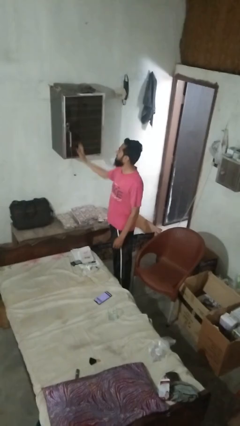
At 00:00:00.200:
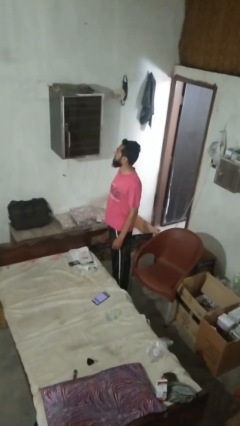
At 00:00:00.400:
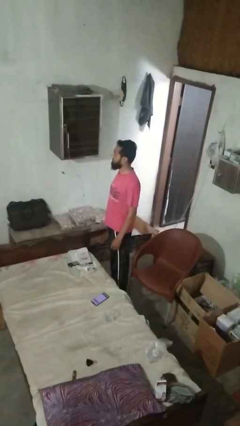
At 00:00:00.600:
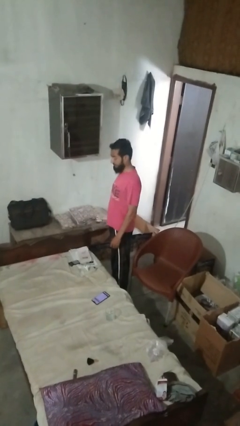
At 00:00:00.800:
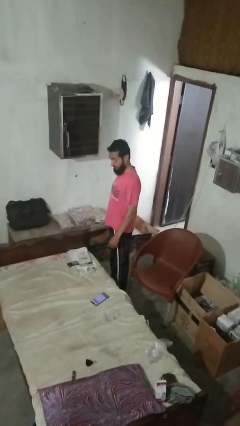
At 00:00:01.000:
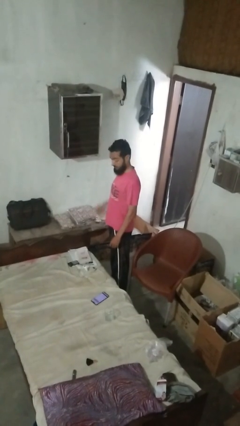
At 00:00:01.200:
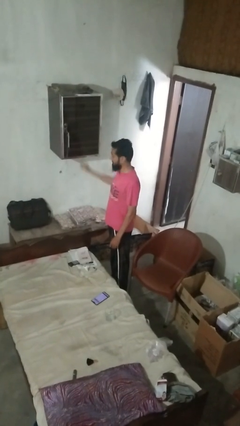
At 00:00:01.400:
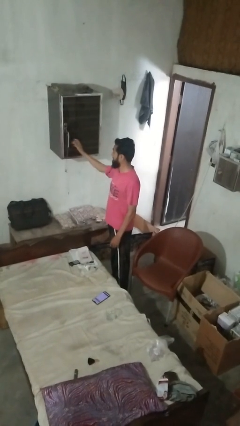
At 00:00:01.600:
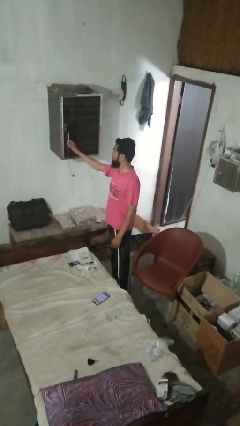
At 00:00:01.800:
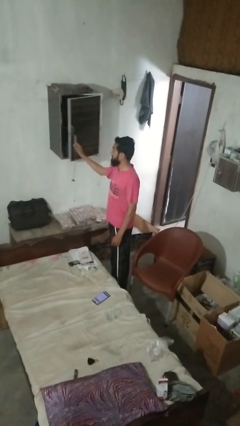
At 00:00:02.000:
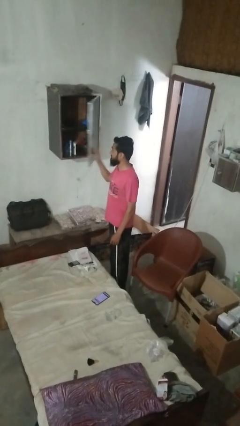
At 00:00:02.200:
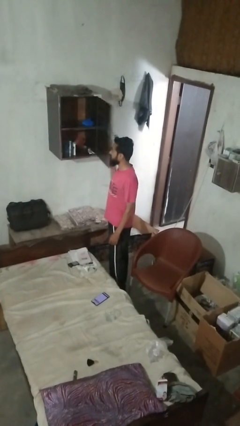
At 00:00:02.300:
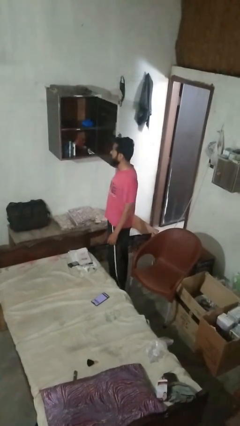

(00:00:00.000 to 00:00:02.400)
person opens dresser drawer

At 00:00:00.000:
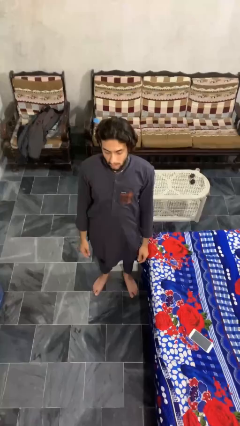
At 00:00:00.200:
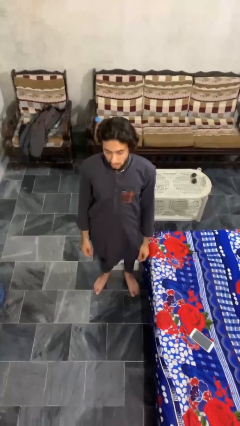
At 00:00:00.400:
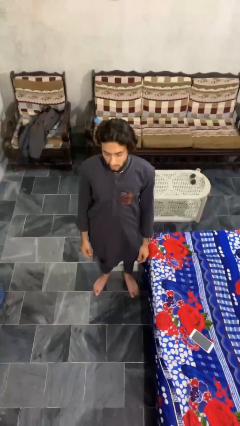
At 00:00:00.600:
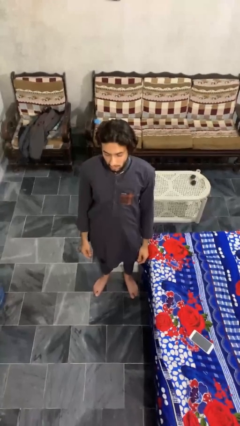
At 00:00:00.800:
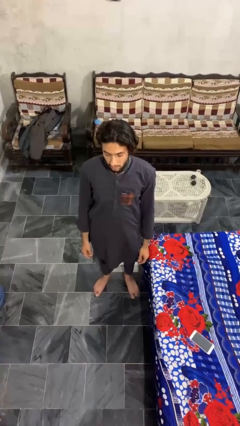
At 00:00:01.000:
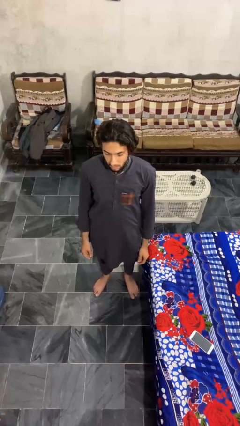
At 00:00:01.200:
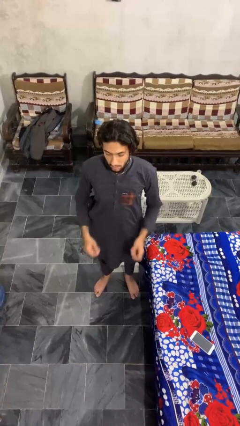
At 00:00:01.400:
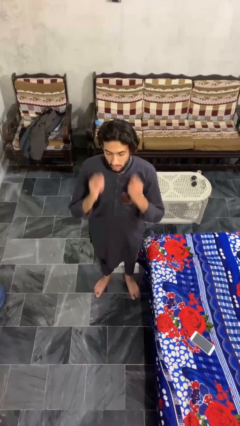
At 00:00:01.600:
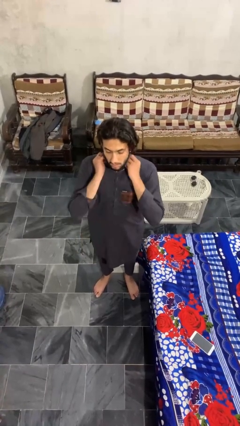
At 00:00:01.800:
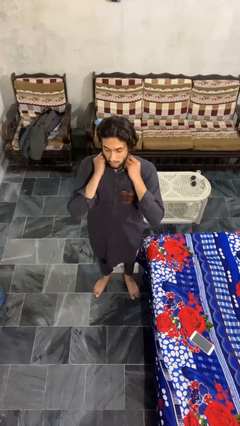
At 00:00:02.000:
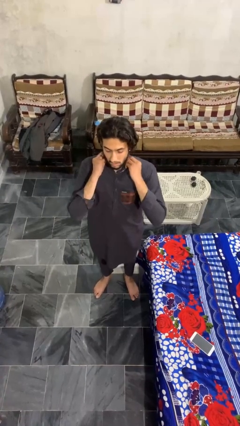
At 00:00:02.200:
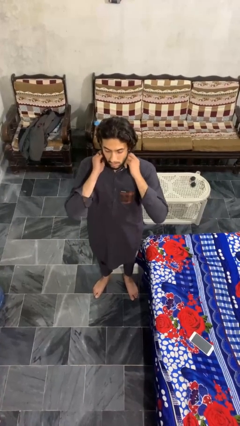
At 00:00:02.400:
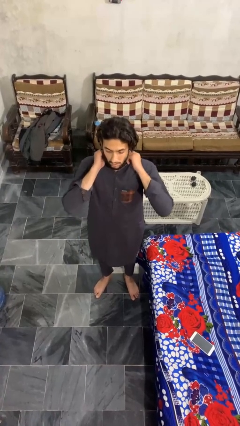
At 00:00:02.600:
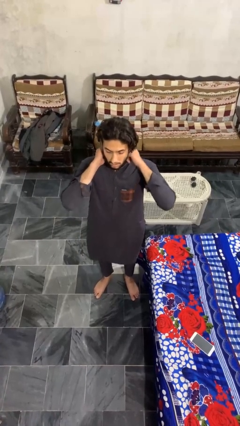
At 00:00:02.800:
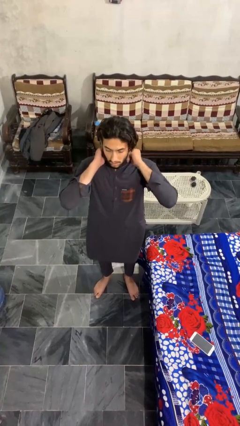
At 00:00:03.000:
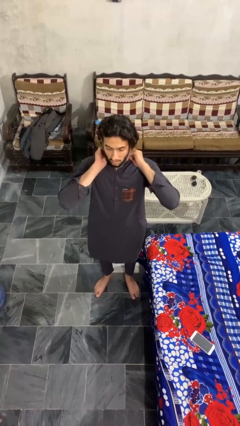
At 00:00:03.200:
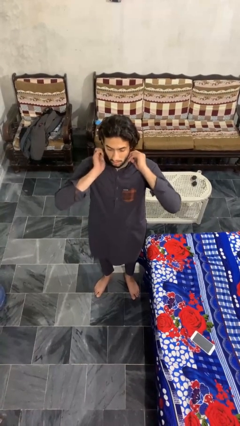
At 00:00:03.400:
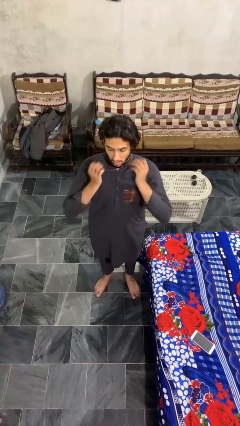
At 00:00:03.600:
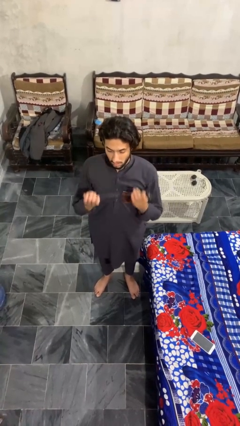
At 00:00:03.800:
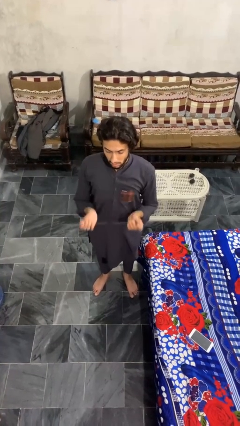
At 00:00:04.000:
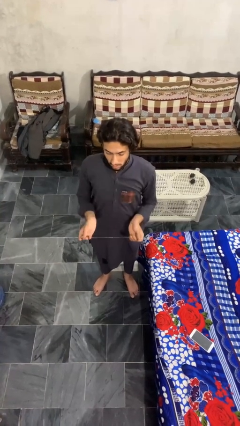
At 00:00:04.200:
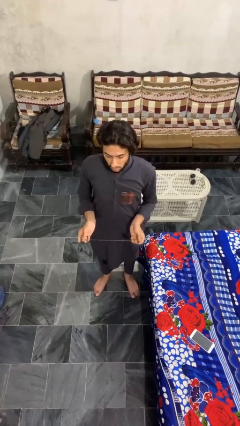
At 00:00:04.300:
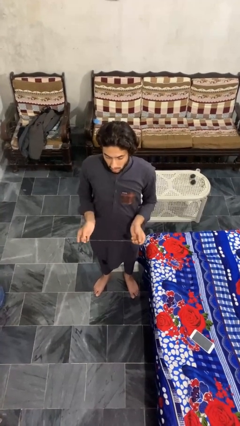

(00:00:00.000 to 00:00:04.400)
person takes off necklace

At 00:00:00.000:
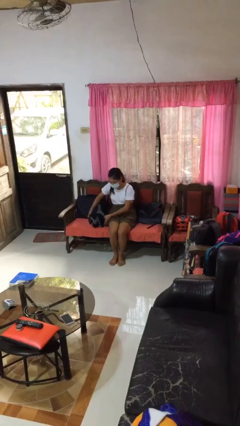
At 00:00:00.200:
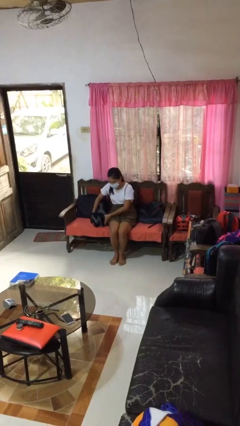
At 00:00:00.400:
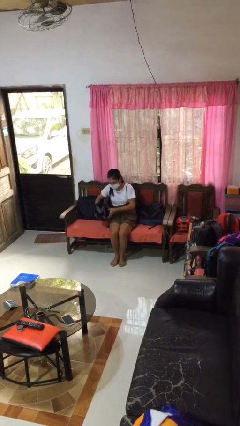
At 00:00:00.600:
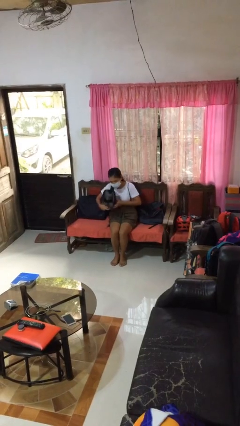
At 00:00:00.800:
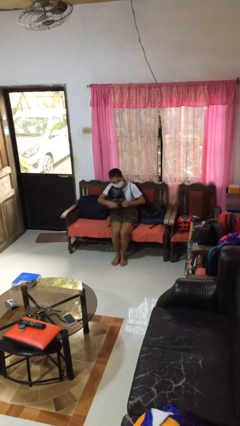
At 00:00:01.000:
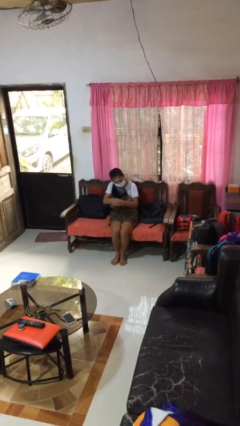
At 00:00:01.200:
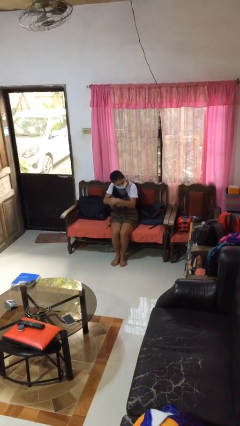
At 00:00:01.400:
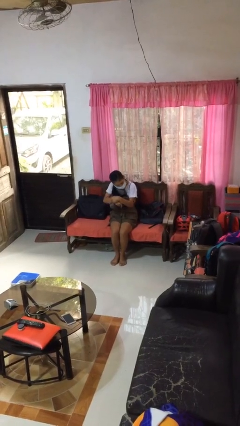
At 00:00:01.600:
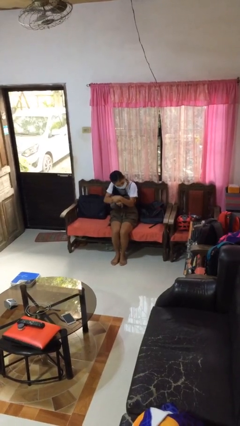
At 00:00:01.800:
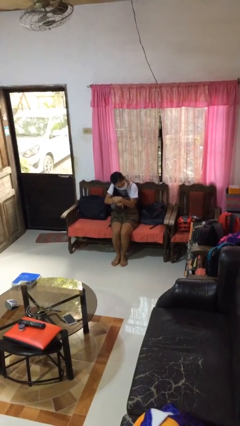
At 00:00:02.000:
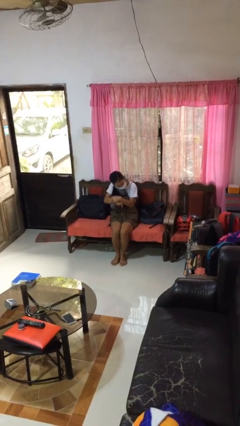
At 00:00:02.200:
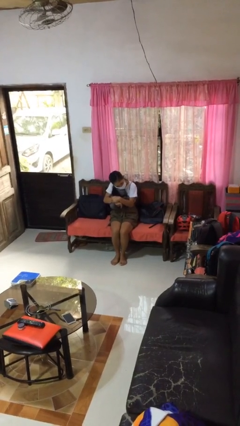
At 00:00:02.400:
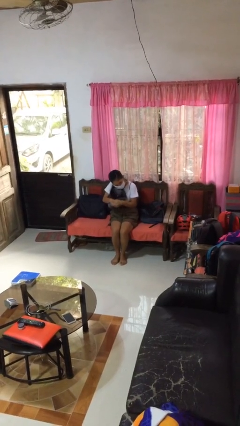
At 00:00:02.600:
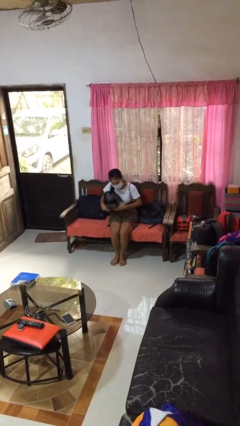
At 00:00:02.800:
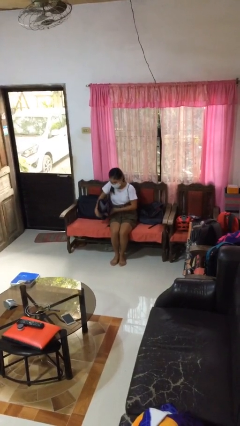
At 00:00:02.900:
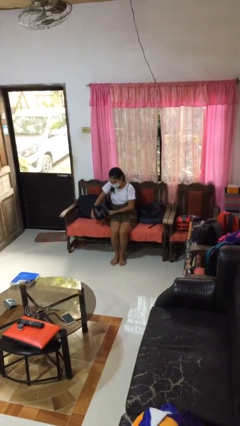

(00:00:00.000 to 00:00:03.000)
person hugs stuffed animal

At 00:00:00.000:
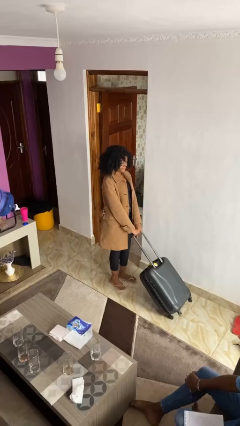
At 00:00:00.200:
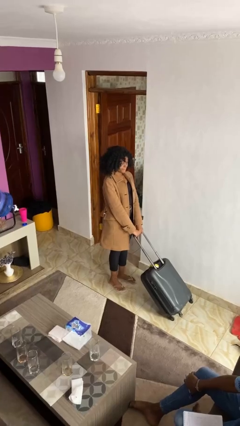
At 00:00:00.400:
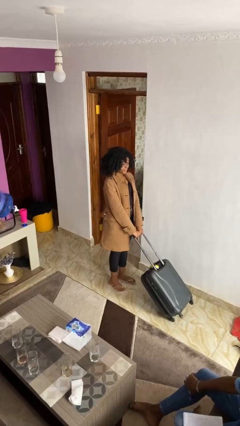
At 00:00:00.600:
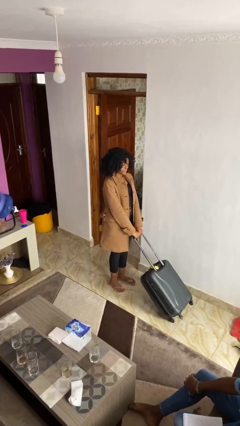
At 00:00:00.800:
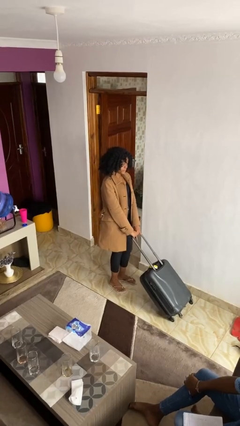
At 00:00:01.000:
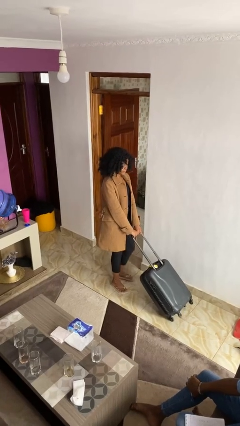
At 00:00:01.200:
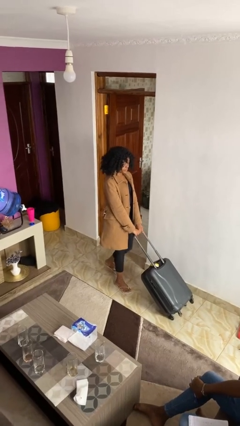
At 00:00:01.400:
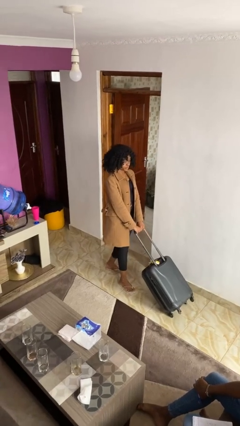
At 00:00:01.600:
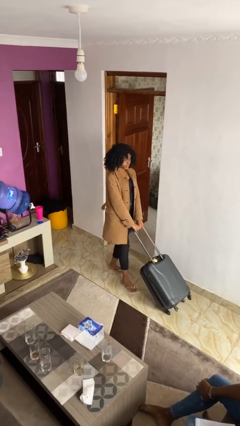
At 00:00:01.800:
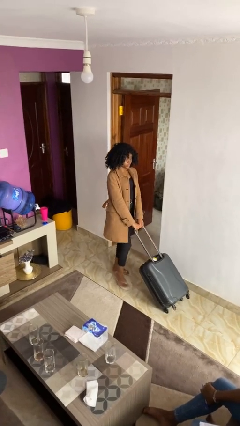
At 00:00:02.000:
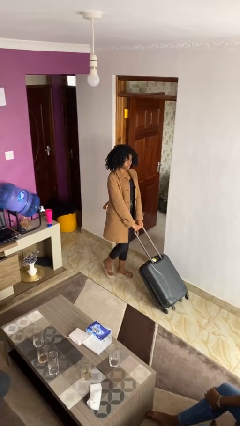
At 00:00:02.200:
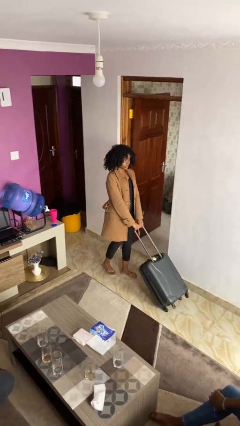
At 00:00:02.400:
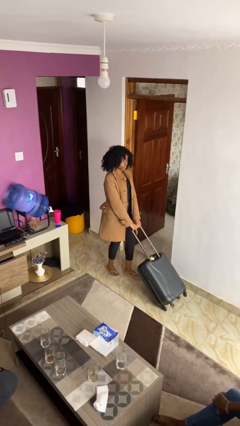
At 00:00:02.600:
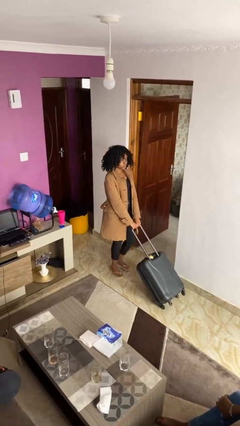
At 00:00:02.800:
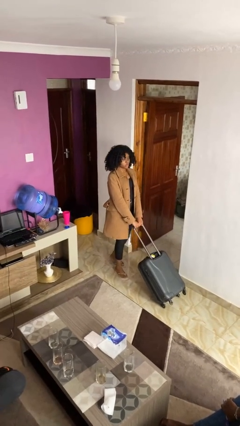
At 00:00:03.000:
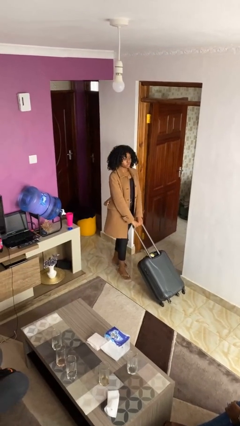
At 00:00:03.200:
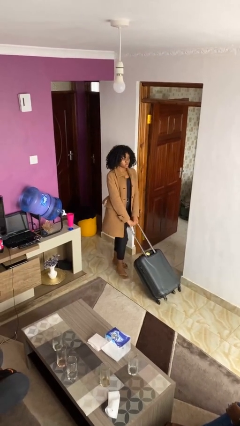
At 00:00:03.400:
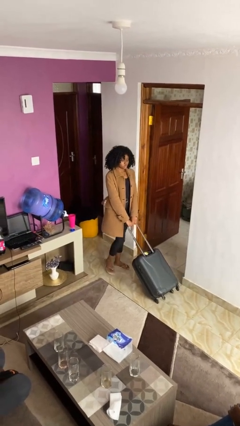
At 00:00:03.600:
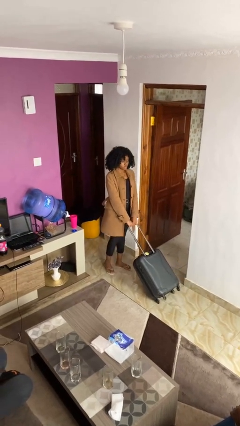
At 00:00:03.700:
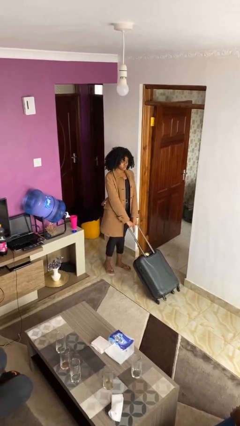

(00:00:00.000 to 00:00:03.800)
person pulls wheeled cart

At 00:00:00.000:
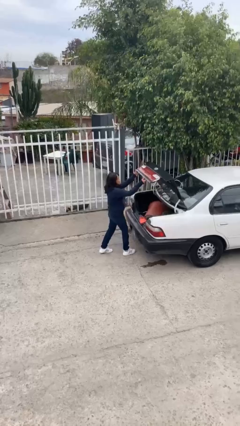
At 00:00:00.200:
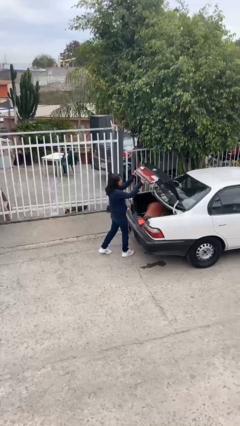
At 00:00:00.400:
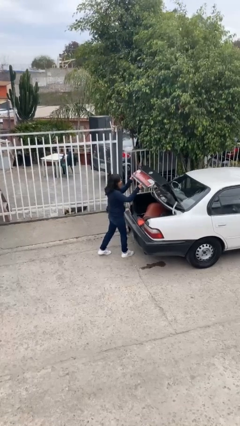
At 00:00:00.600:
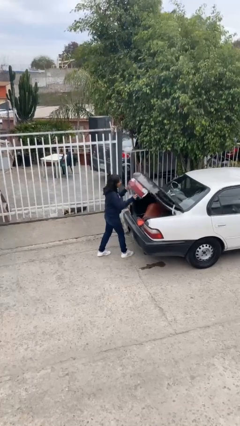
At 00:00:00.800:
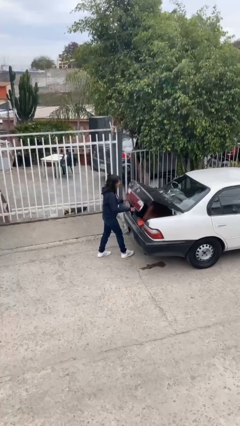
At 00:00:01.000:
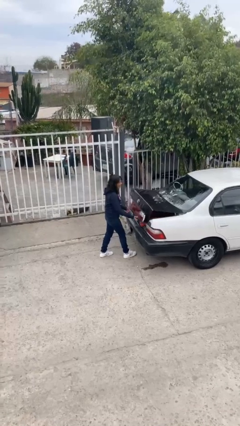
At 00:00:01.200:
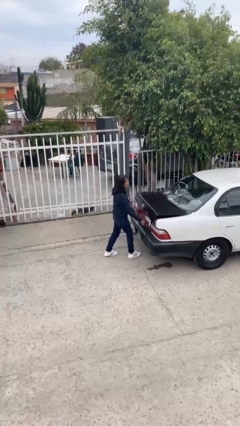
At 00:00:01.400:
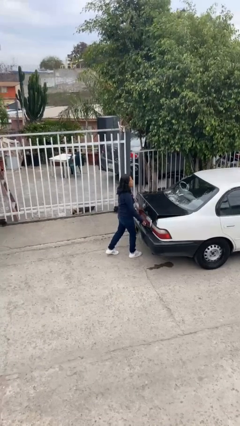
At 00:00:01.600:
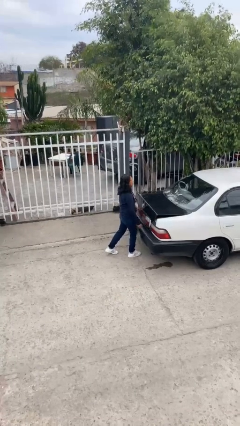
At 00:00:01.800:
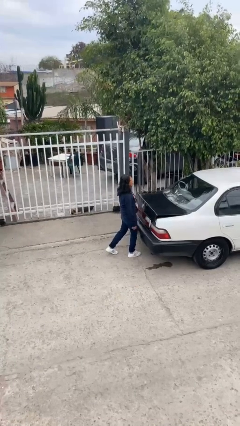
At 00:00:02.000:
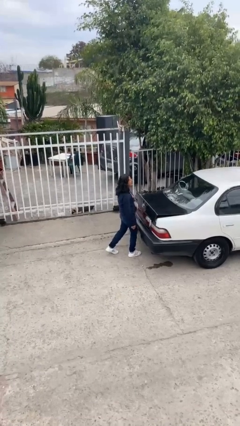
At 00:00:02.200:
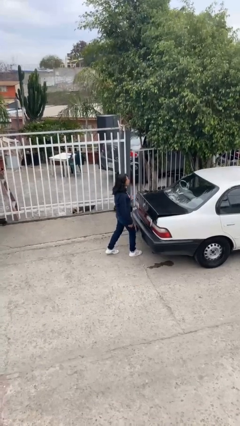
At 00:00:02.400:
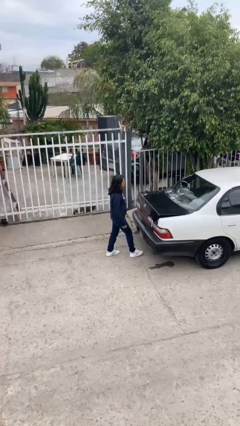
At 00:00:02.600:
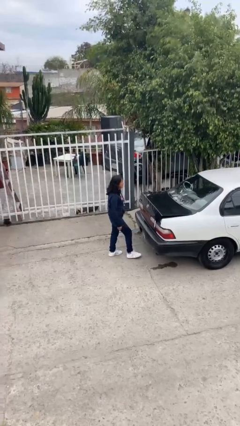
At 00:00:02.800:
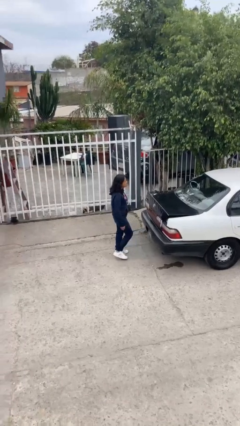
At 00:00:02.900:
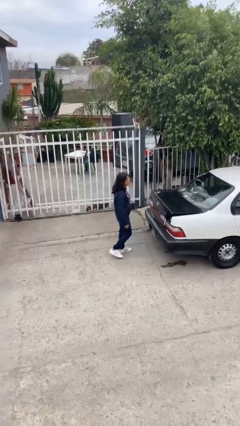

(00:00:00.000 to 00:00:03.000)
person closes car trunk

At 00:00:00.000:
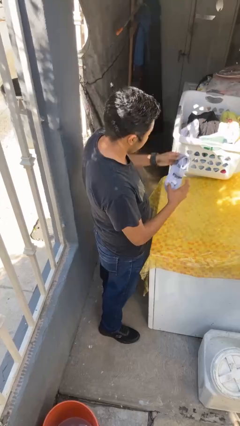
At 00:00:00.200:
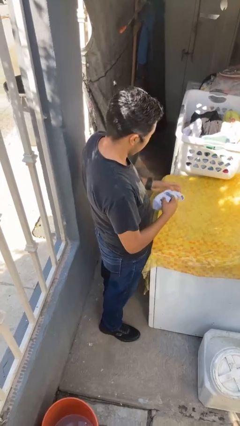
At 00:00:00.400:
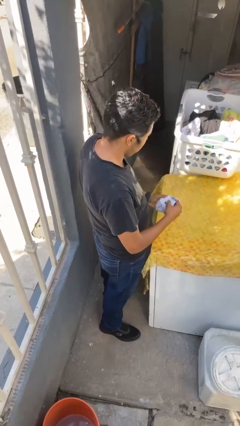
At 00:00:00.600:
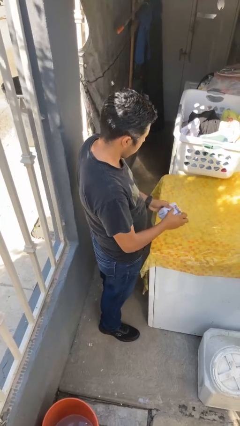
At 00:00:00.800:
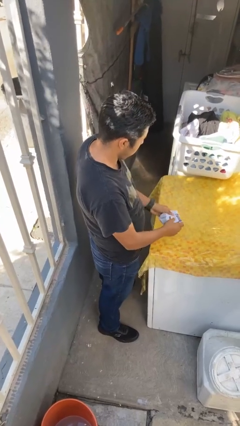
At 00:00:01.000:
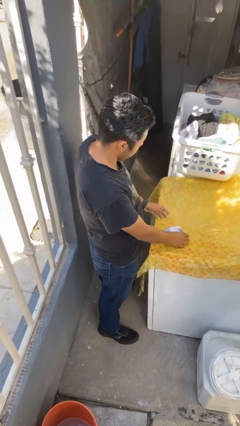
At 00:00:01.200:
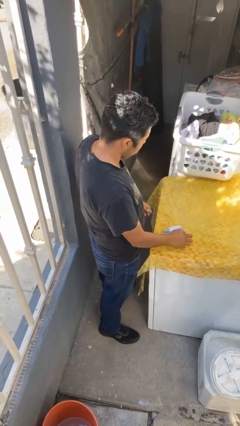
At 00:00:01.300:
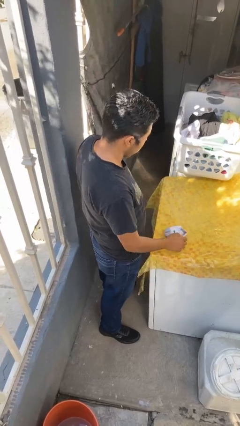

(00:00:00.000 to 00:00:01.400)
person folds socks
